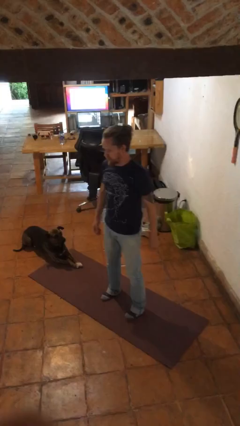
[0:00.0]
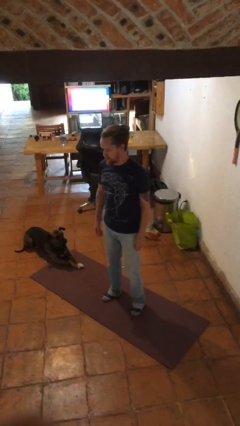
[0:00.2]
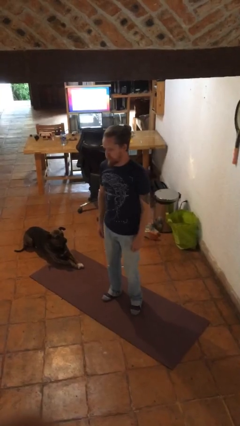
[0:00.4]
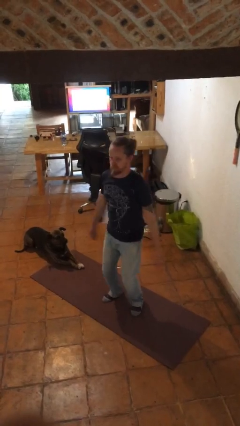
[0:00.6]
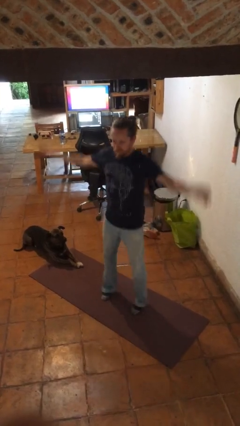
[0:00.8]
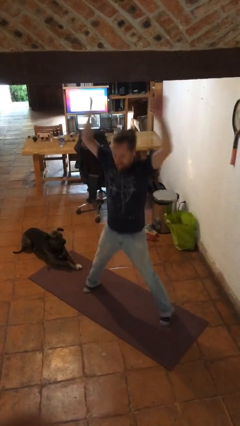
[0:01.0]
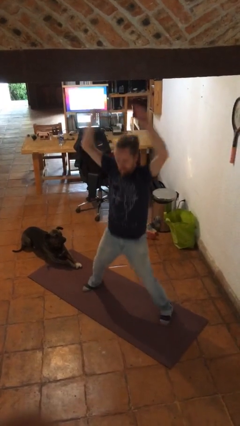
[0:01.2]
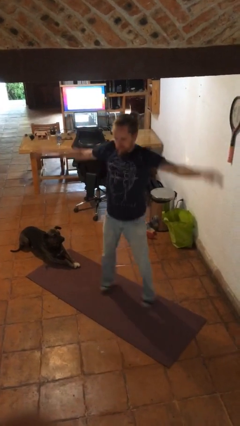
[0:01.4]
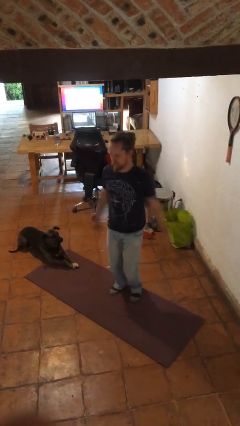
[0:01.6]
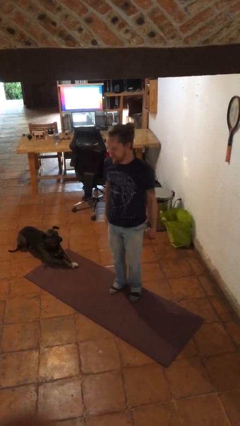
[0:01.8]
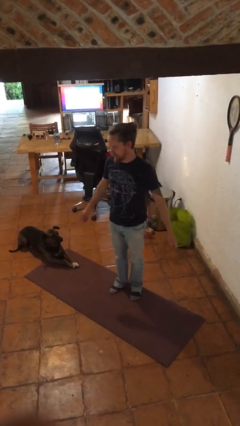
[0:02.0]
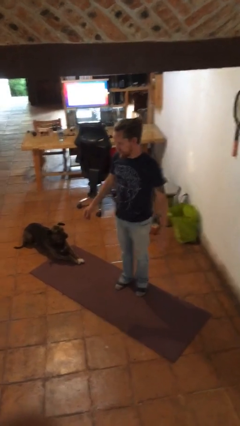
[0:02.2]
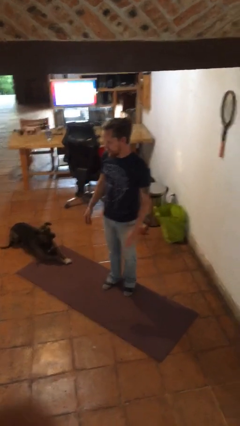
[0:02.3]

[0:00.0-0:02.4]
person exercises with jumping jacks

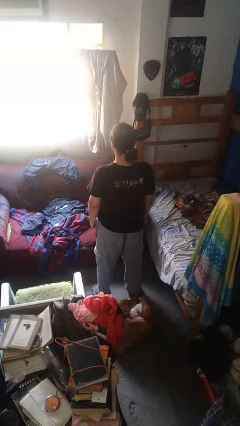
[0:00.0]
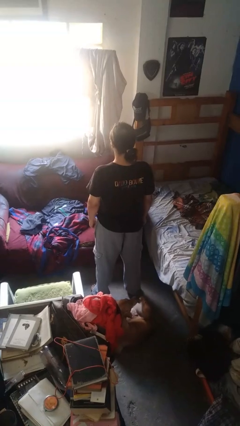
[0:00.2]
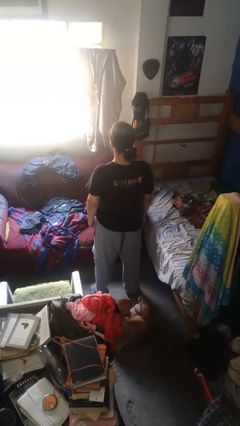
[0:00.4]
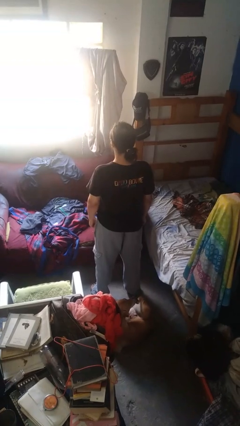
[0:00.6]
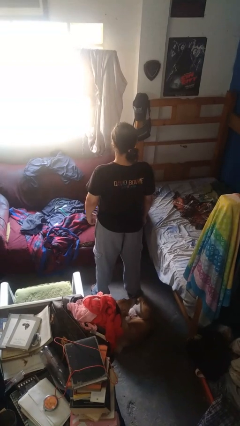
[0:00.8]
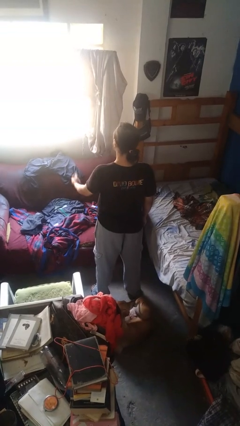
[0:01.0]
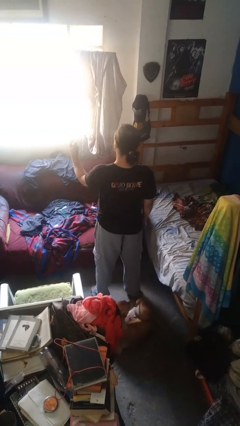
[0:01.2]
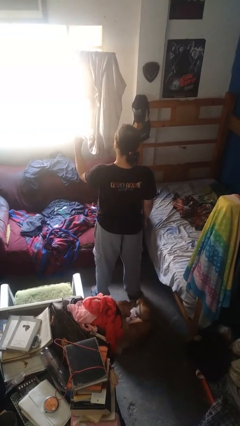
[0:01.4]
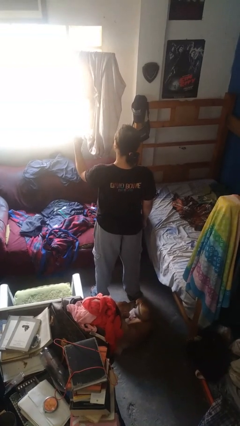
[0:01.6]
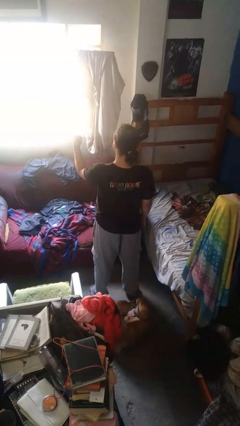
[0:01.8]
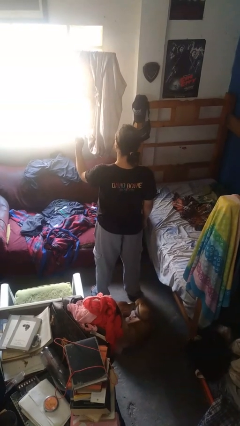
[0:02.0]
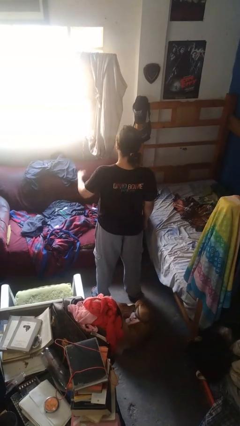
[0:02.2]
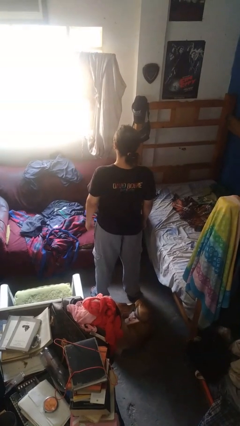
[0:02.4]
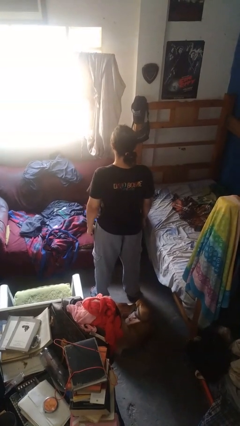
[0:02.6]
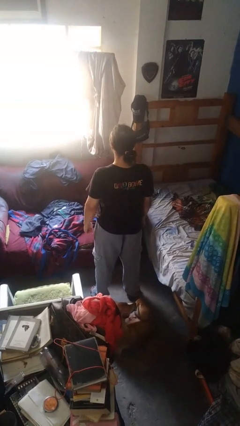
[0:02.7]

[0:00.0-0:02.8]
person gestures number one

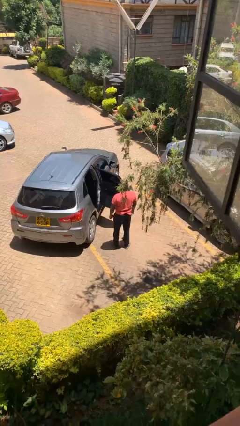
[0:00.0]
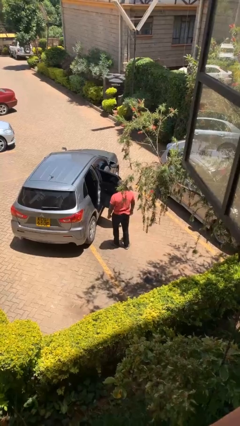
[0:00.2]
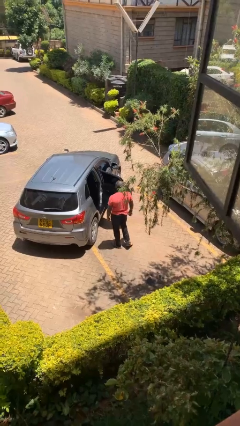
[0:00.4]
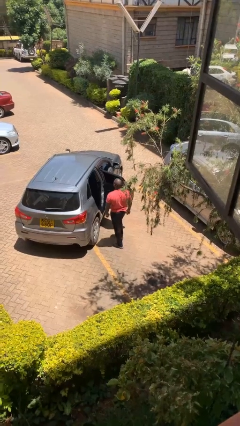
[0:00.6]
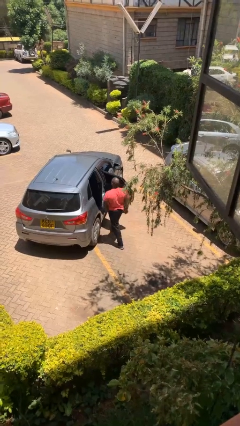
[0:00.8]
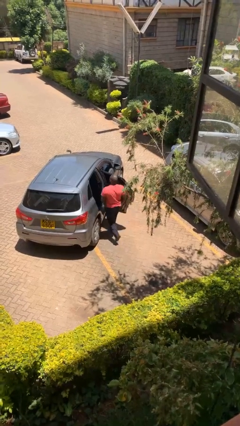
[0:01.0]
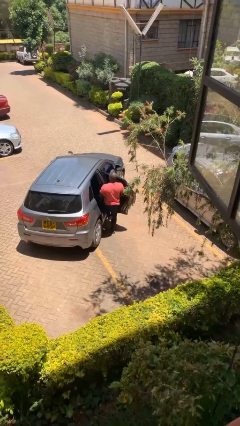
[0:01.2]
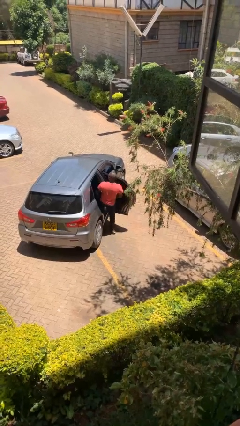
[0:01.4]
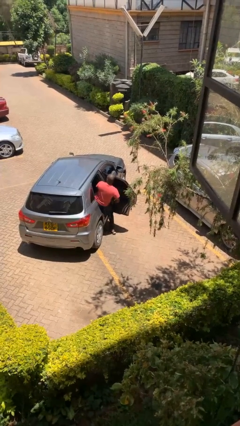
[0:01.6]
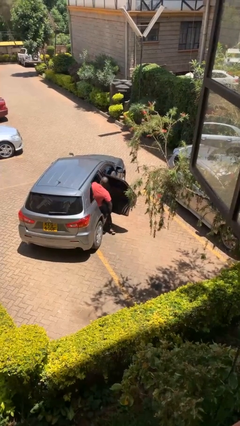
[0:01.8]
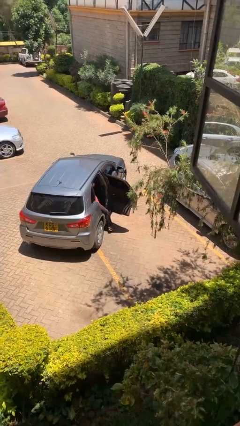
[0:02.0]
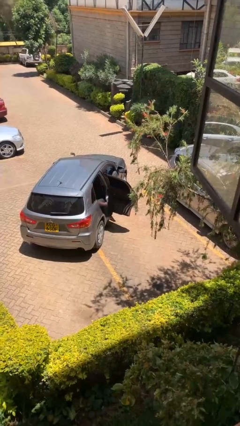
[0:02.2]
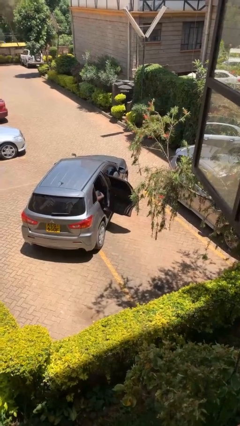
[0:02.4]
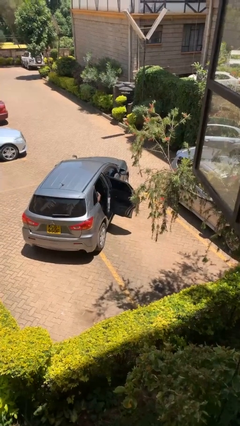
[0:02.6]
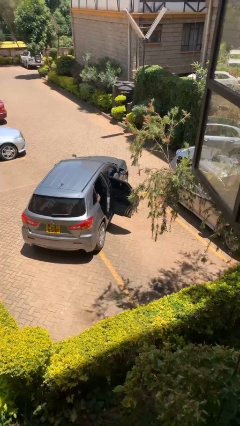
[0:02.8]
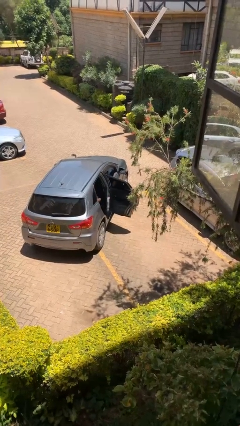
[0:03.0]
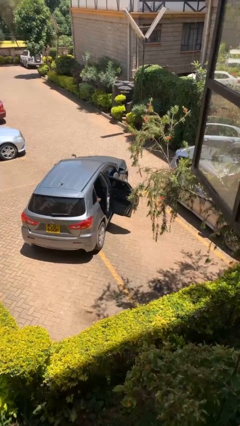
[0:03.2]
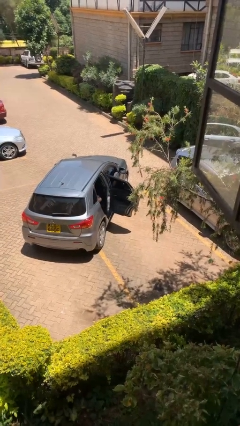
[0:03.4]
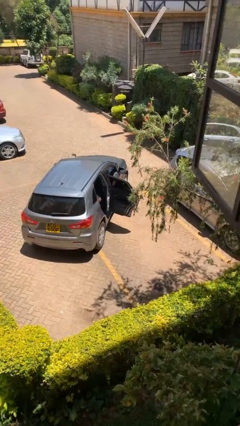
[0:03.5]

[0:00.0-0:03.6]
person enters car

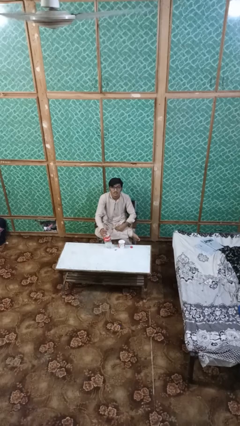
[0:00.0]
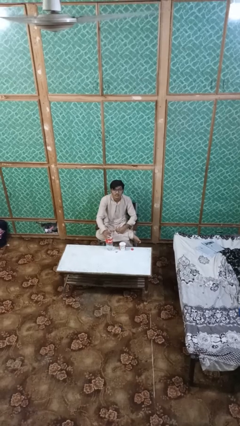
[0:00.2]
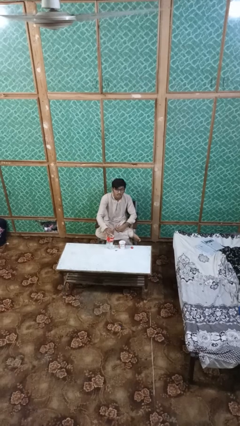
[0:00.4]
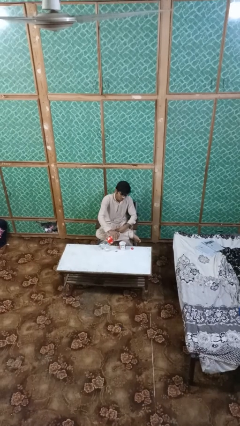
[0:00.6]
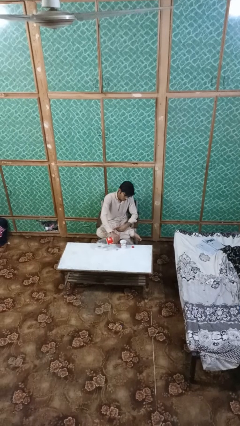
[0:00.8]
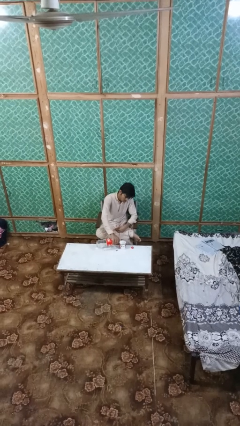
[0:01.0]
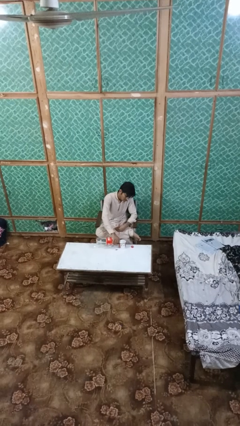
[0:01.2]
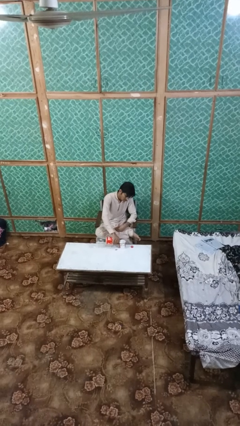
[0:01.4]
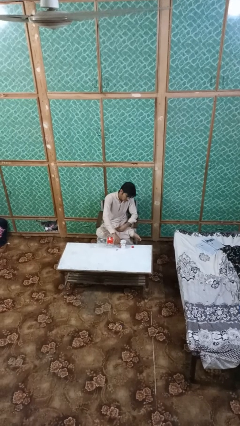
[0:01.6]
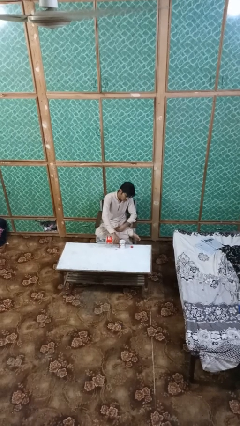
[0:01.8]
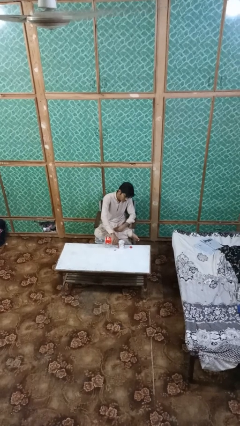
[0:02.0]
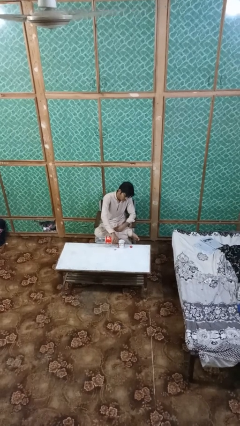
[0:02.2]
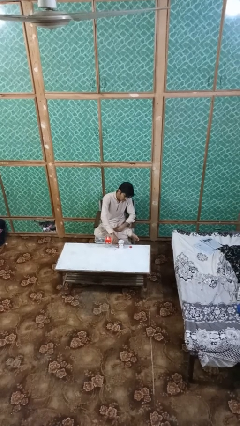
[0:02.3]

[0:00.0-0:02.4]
person pours liquid into cup

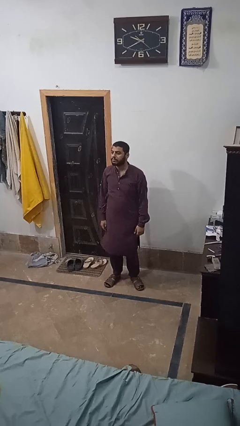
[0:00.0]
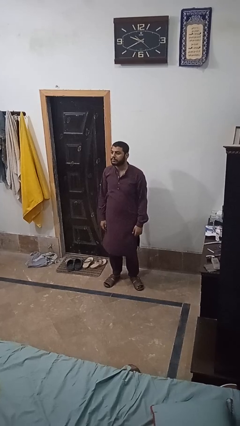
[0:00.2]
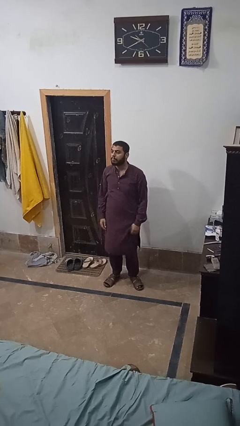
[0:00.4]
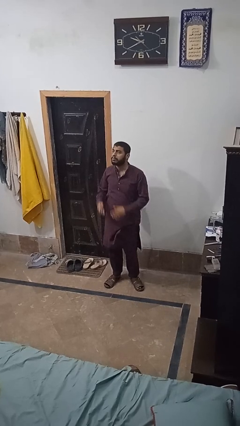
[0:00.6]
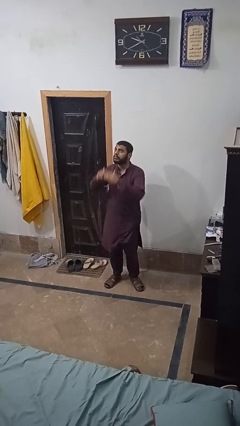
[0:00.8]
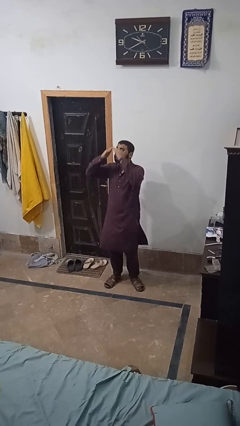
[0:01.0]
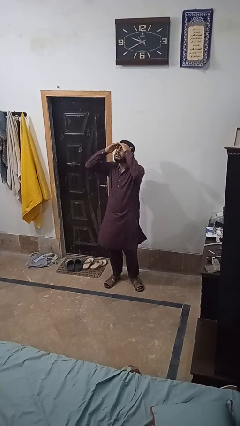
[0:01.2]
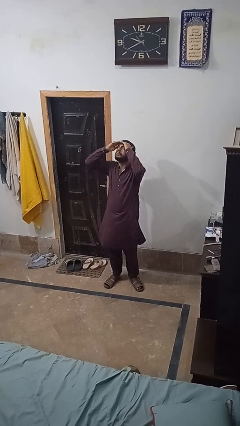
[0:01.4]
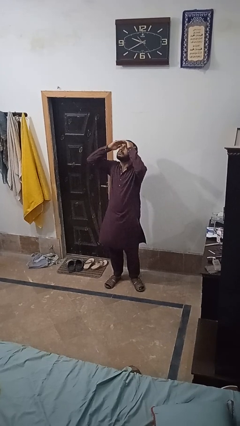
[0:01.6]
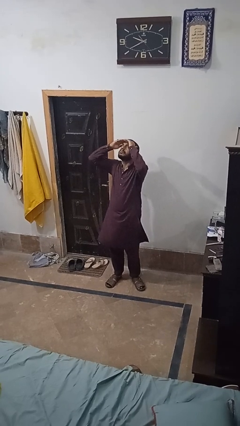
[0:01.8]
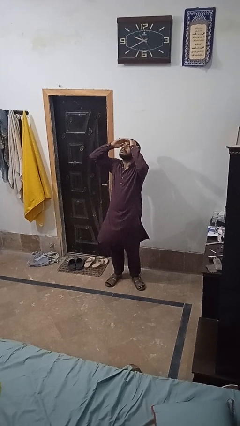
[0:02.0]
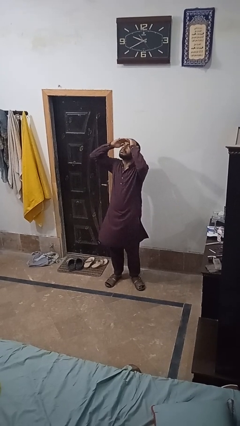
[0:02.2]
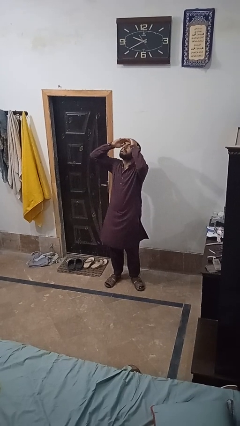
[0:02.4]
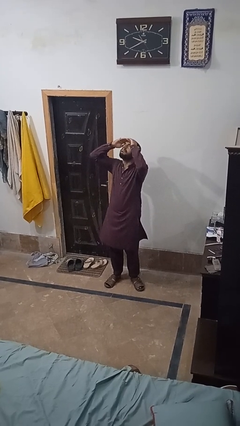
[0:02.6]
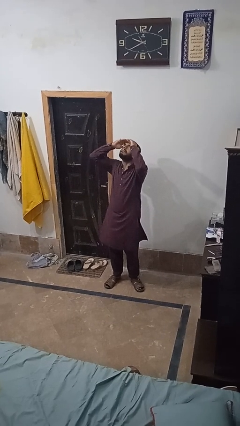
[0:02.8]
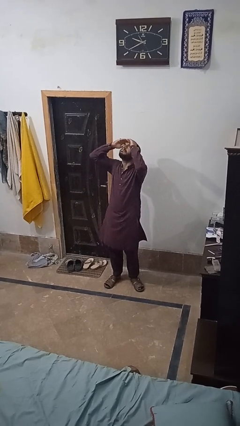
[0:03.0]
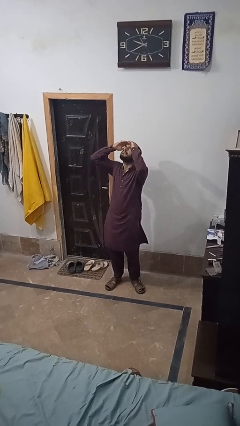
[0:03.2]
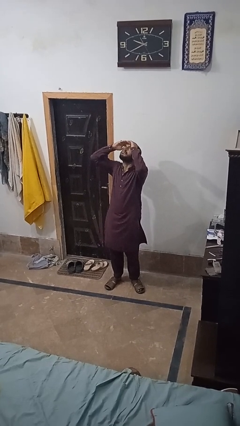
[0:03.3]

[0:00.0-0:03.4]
person shades eyes

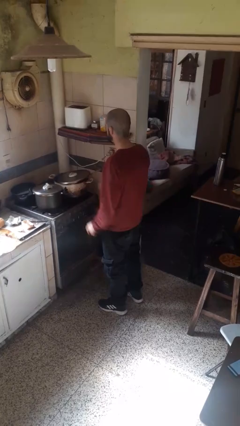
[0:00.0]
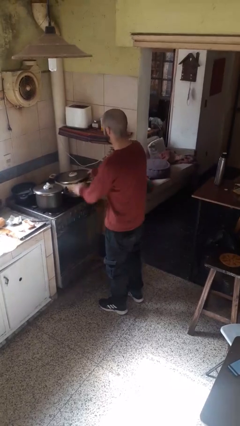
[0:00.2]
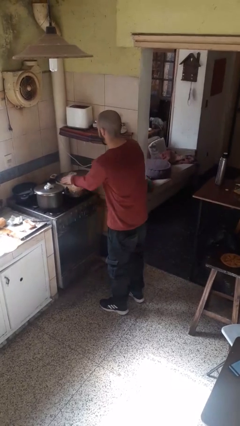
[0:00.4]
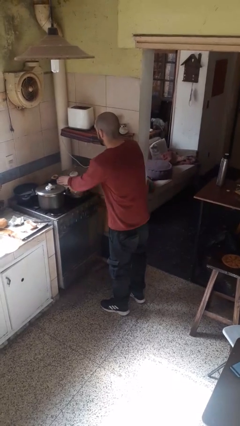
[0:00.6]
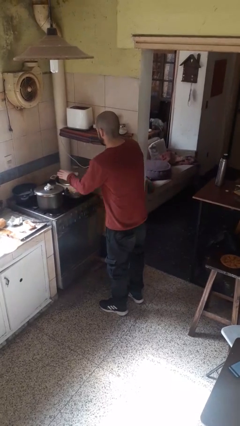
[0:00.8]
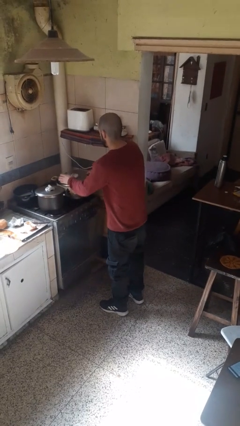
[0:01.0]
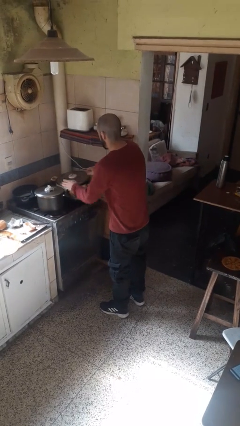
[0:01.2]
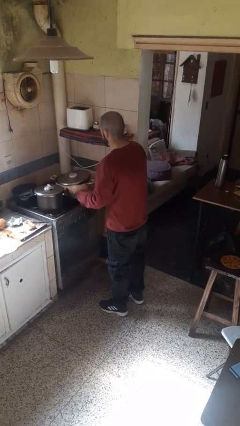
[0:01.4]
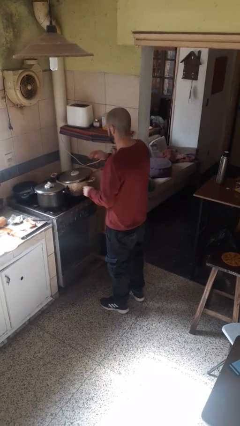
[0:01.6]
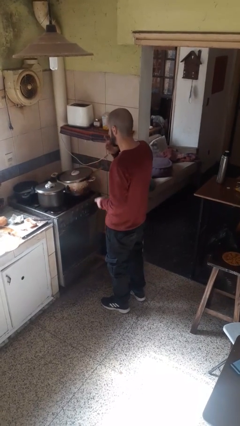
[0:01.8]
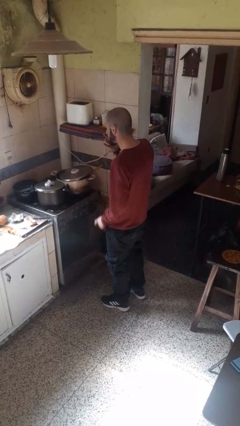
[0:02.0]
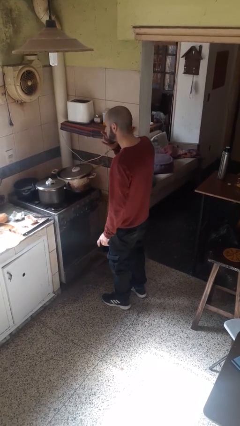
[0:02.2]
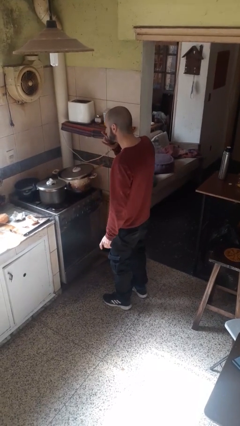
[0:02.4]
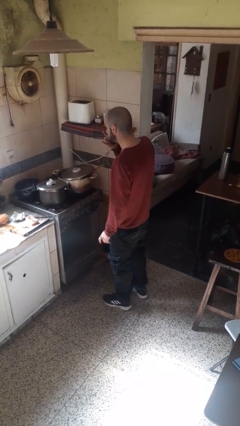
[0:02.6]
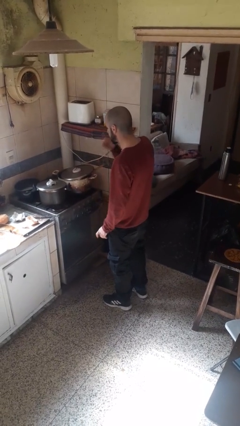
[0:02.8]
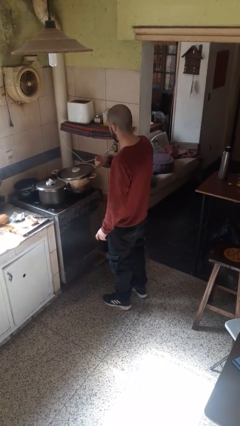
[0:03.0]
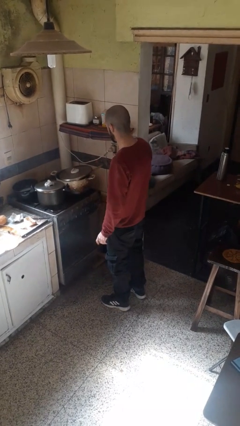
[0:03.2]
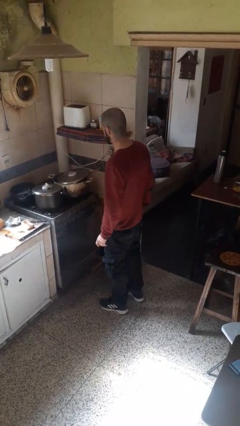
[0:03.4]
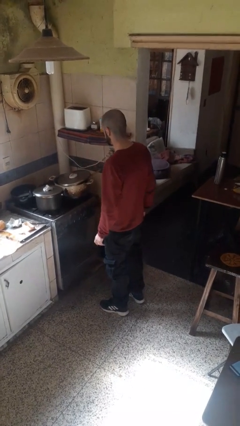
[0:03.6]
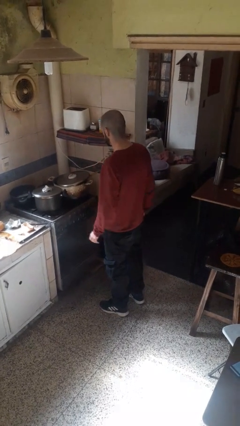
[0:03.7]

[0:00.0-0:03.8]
person burns hand
